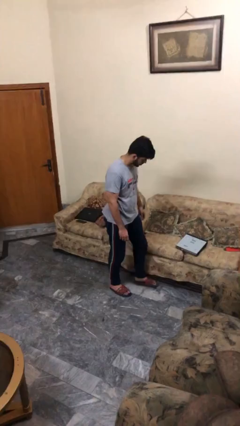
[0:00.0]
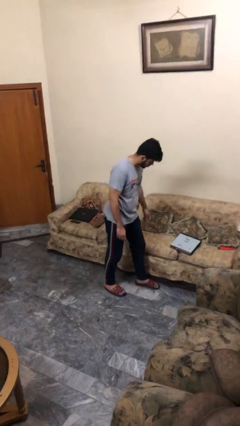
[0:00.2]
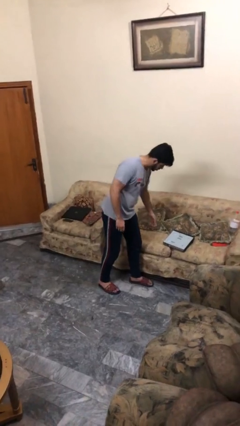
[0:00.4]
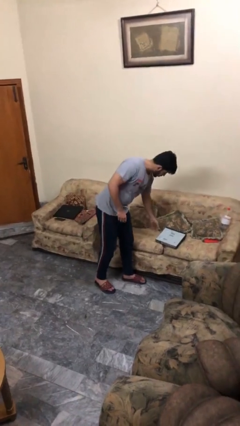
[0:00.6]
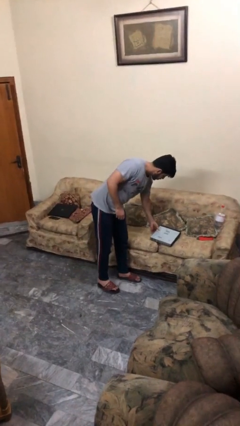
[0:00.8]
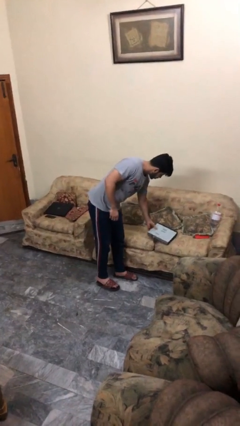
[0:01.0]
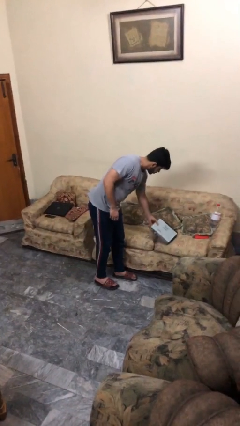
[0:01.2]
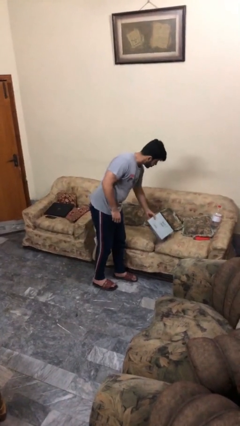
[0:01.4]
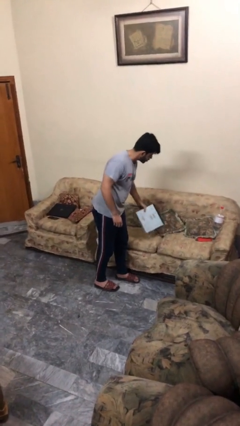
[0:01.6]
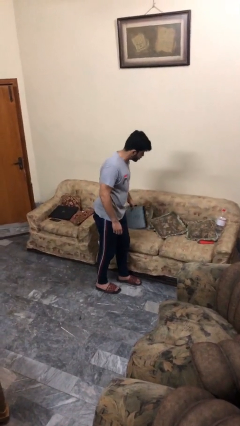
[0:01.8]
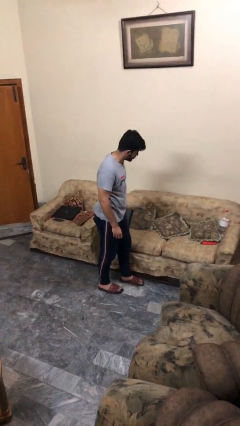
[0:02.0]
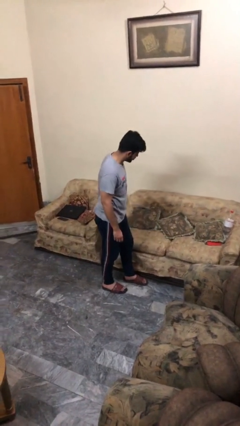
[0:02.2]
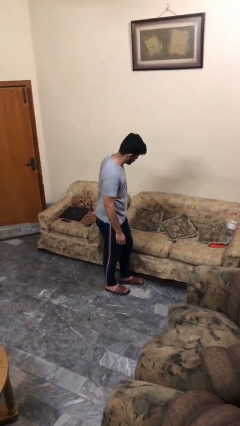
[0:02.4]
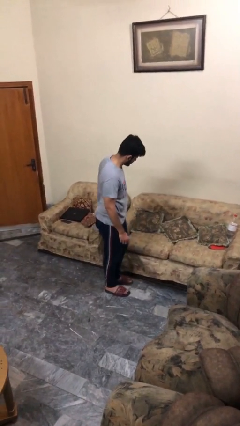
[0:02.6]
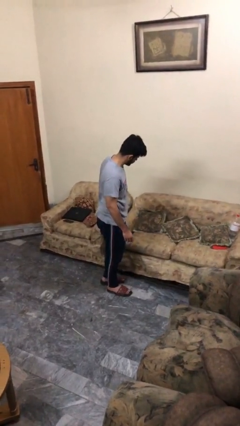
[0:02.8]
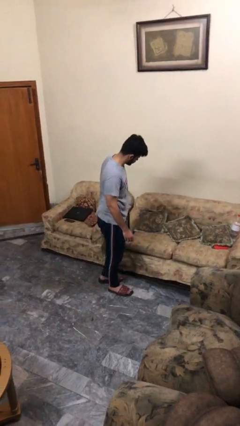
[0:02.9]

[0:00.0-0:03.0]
person picks up object from couch

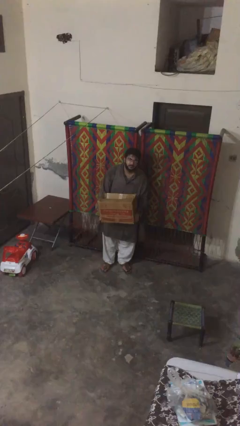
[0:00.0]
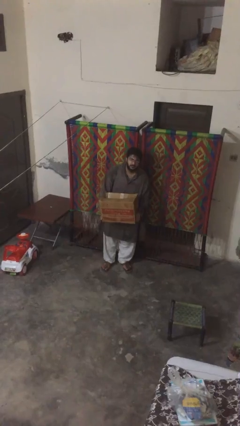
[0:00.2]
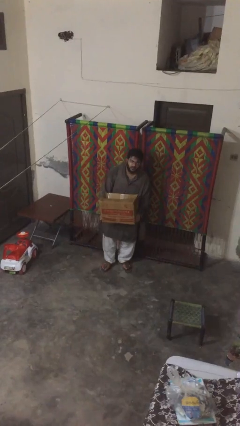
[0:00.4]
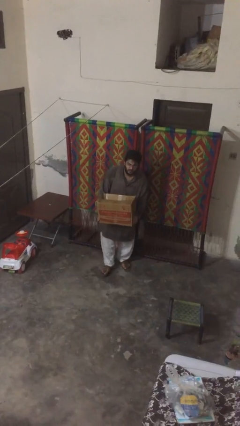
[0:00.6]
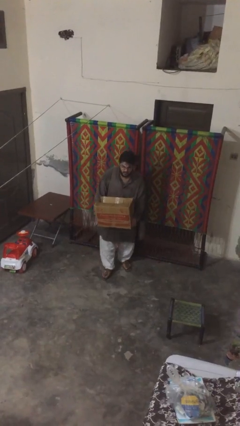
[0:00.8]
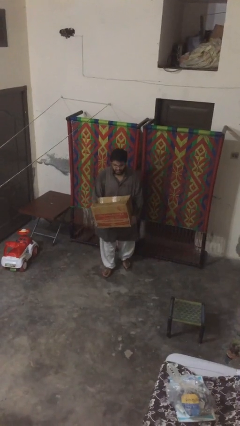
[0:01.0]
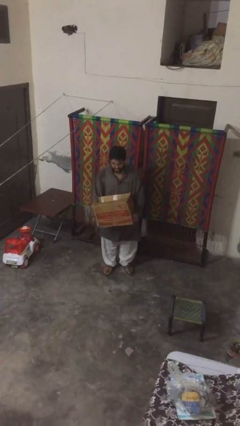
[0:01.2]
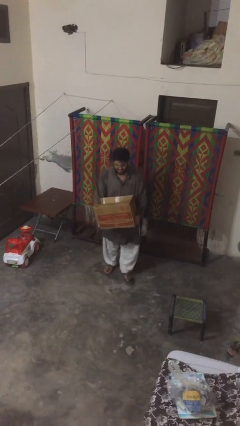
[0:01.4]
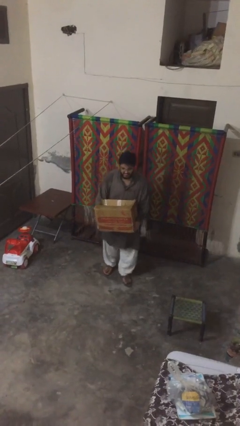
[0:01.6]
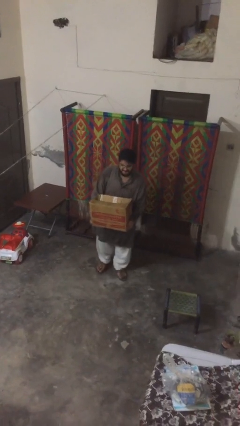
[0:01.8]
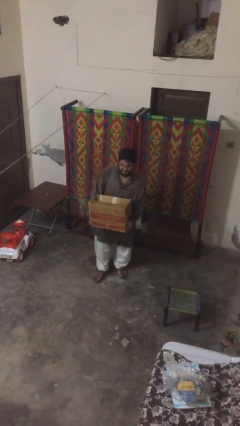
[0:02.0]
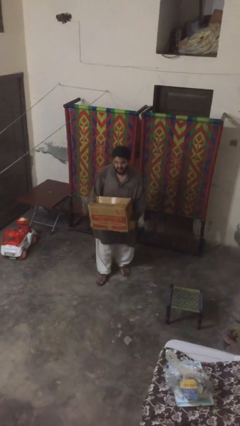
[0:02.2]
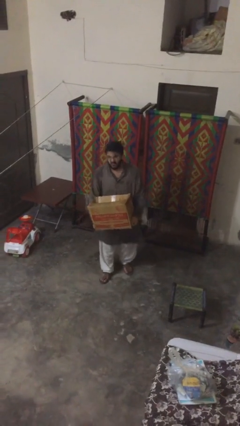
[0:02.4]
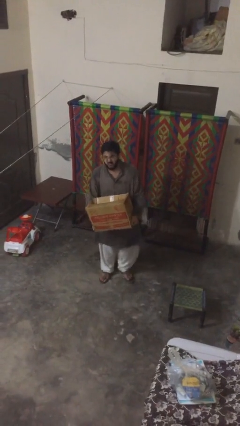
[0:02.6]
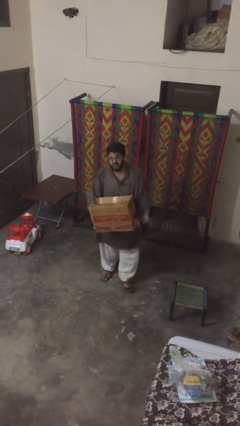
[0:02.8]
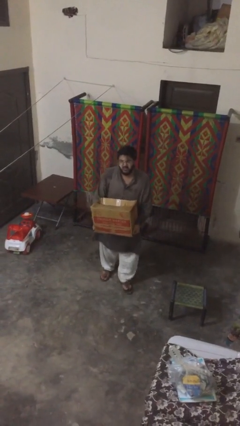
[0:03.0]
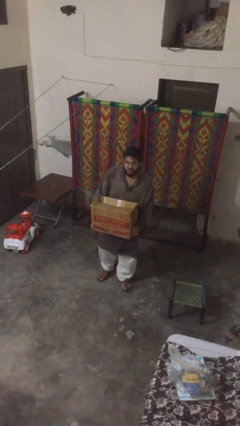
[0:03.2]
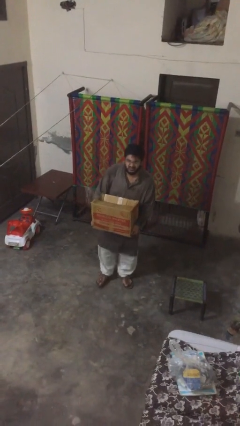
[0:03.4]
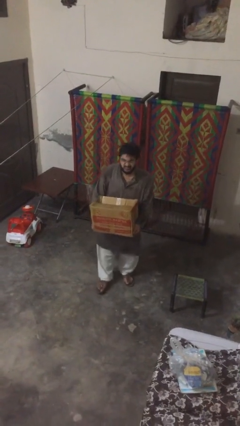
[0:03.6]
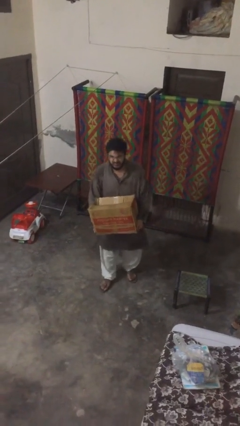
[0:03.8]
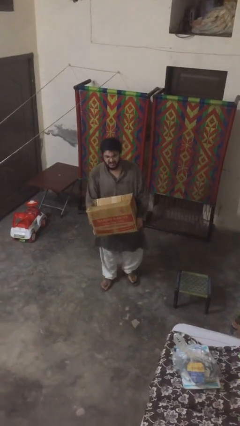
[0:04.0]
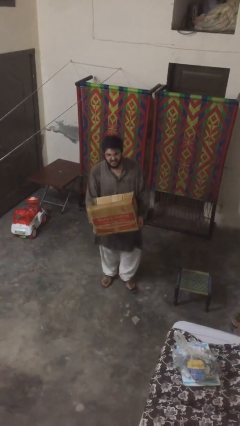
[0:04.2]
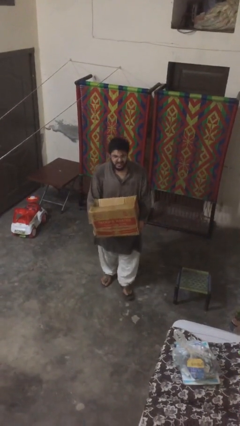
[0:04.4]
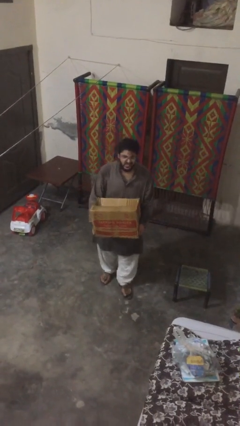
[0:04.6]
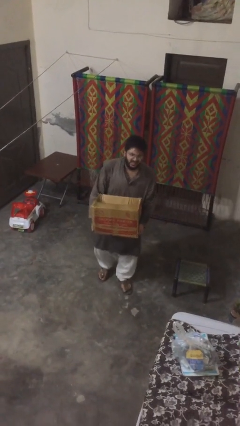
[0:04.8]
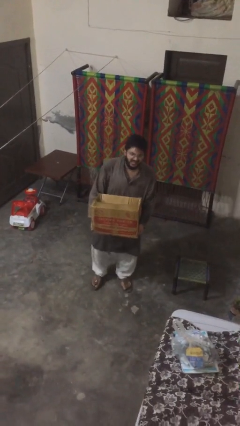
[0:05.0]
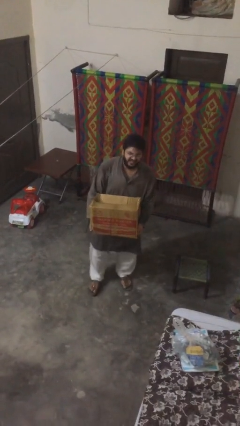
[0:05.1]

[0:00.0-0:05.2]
person carries heavy object

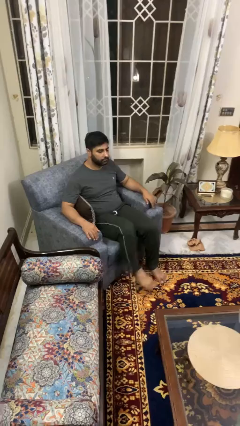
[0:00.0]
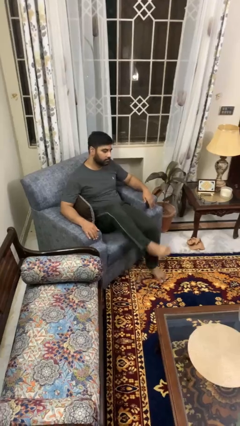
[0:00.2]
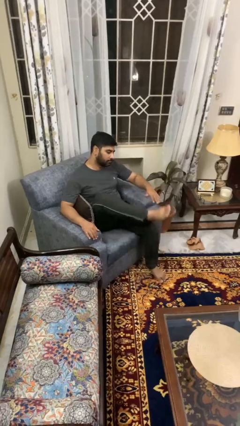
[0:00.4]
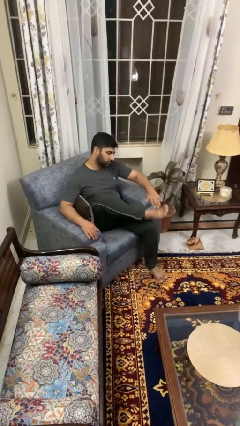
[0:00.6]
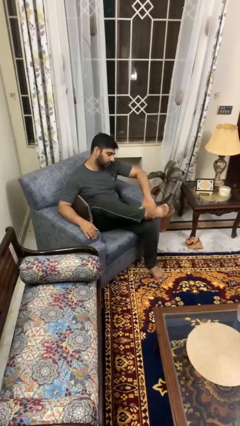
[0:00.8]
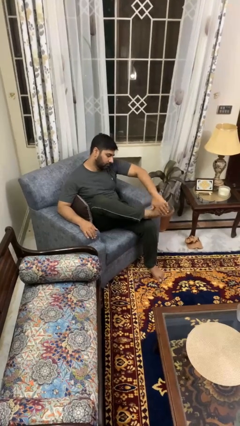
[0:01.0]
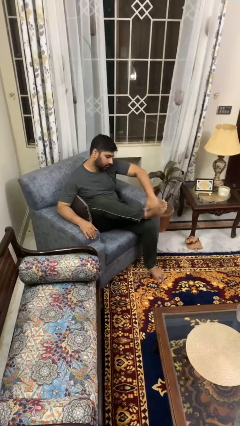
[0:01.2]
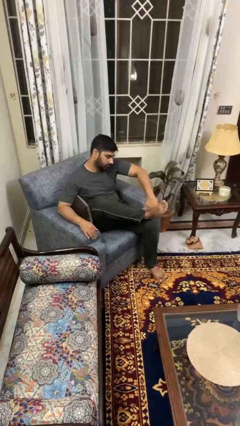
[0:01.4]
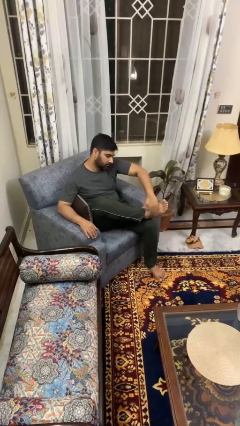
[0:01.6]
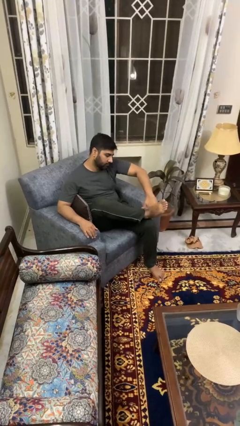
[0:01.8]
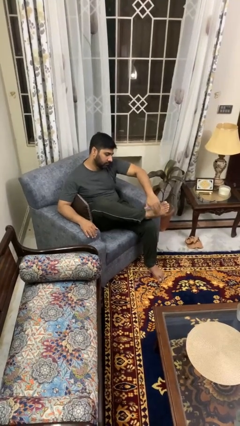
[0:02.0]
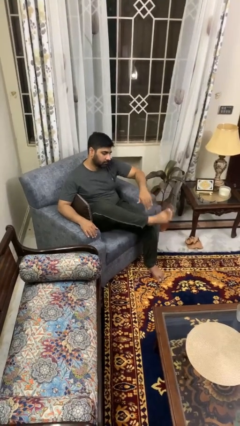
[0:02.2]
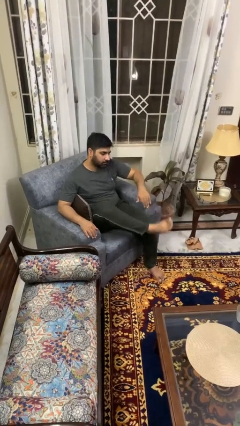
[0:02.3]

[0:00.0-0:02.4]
person rubs foot

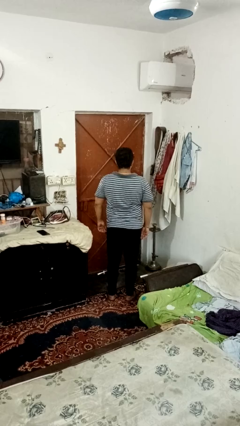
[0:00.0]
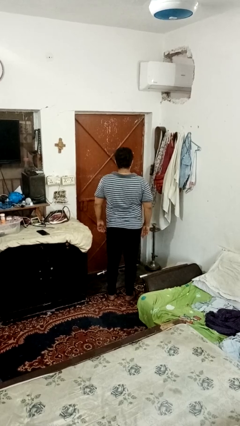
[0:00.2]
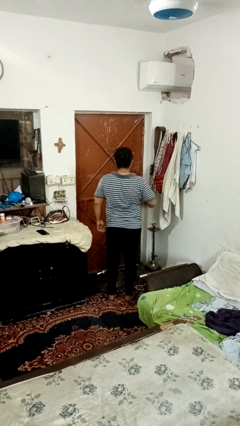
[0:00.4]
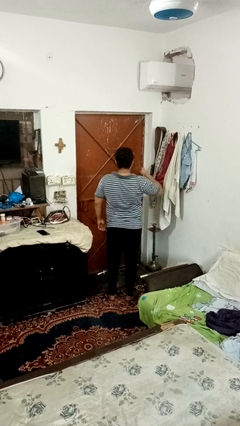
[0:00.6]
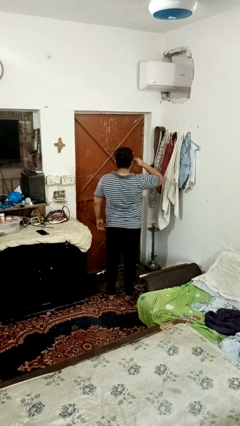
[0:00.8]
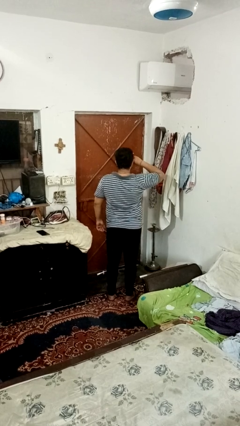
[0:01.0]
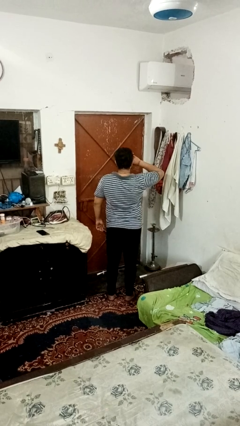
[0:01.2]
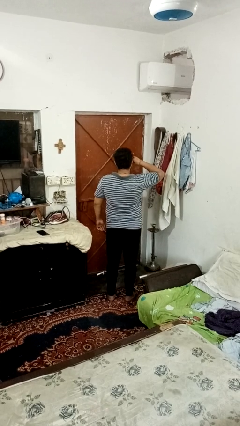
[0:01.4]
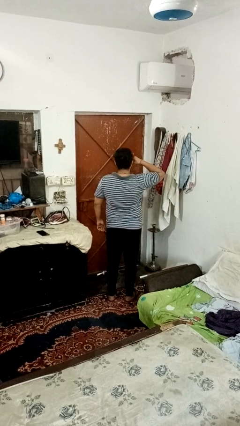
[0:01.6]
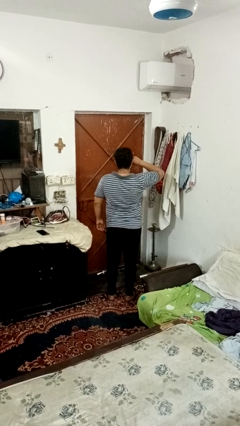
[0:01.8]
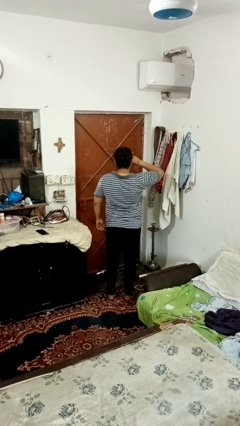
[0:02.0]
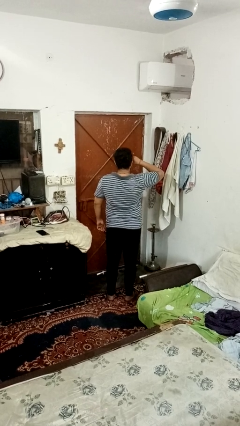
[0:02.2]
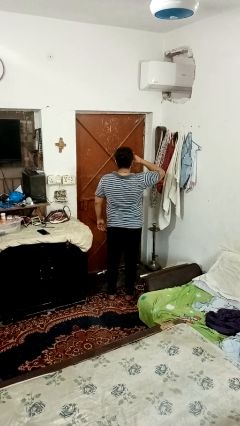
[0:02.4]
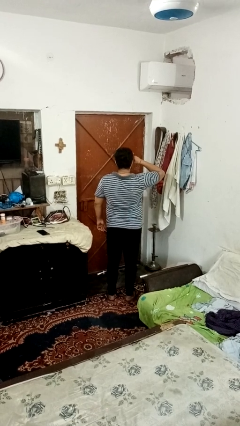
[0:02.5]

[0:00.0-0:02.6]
person rubs eyes

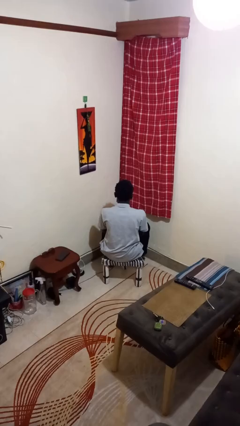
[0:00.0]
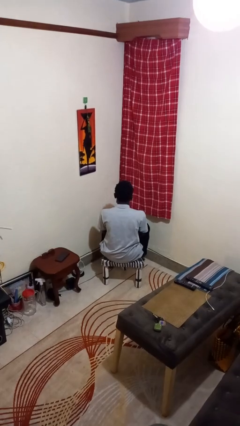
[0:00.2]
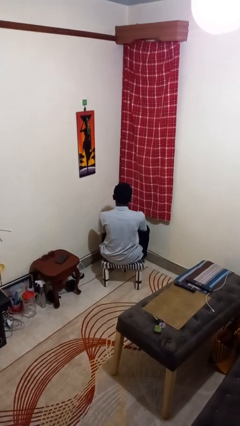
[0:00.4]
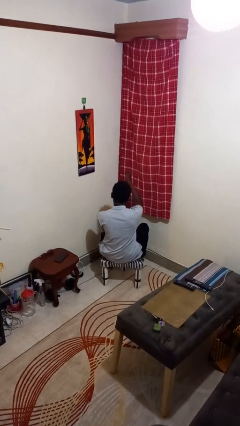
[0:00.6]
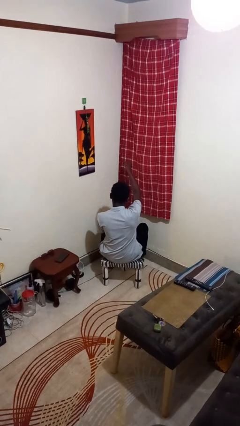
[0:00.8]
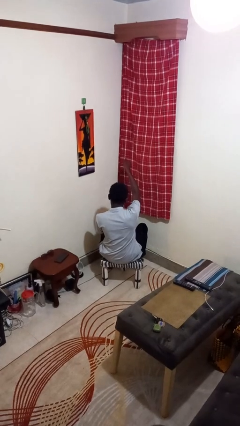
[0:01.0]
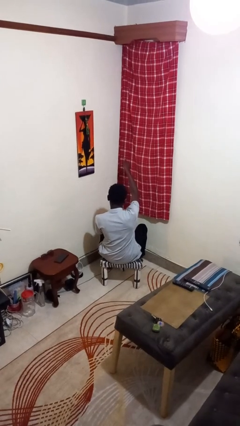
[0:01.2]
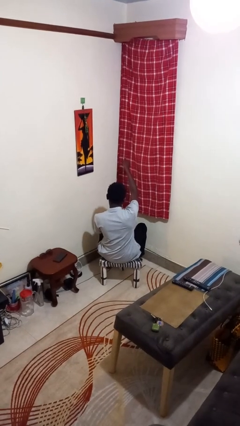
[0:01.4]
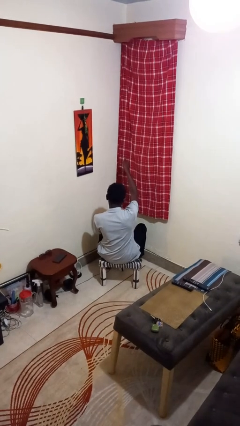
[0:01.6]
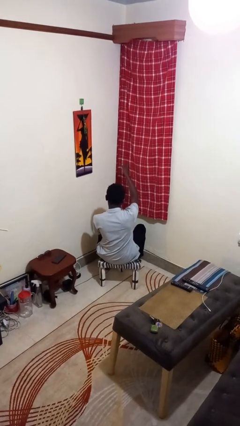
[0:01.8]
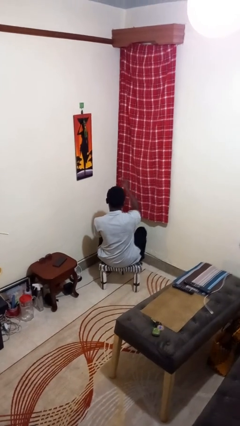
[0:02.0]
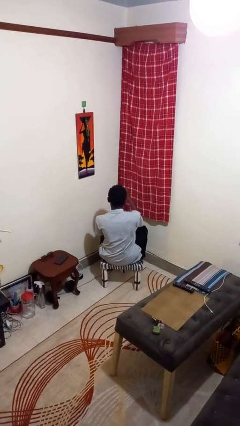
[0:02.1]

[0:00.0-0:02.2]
person gestures thumbs up

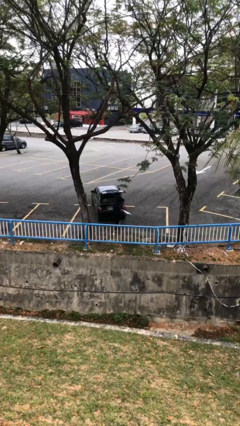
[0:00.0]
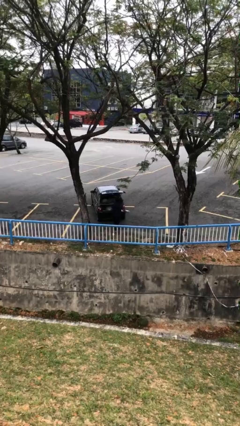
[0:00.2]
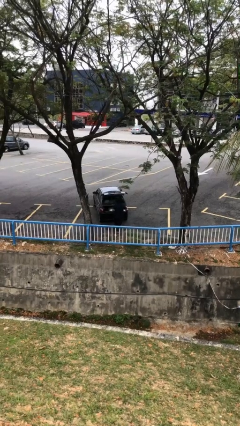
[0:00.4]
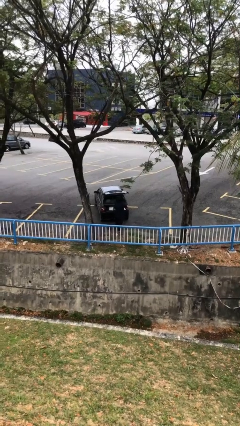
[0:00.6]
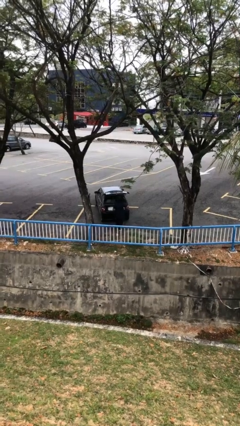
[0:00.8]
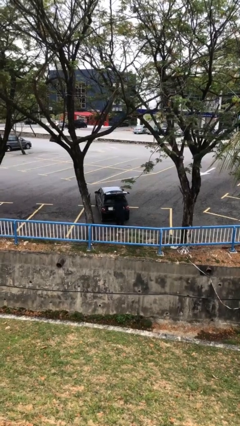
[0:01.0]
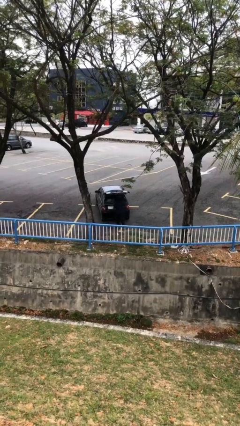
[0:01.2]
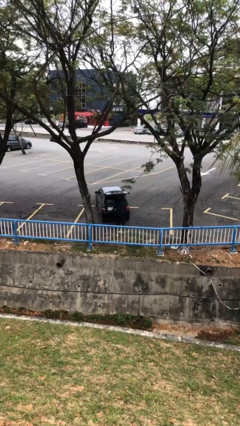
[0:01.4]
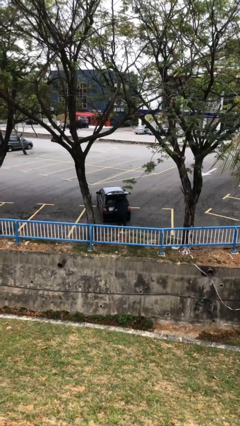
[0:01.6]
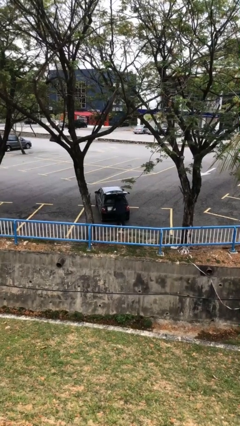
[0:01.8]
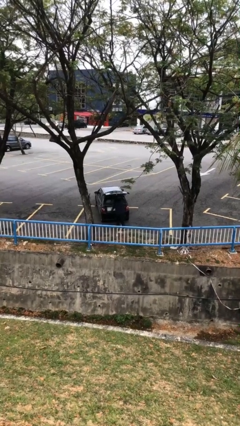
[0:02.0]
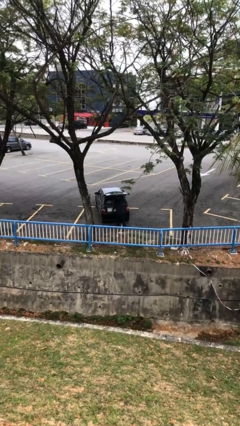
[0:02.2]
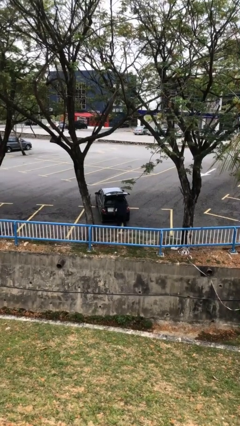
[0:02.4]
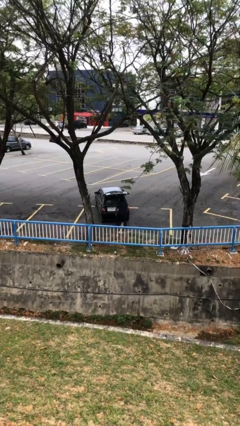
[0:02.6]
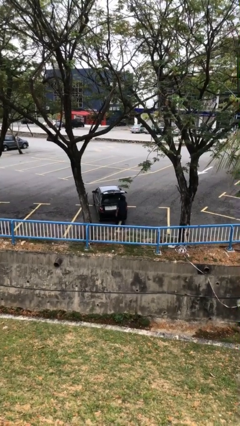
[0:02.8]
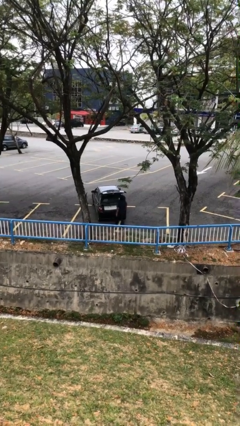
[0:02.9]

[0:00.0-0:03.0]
person loads car
